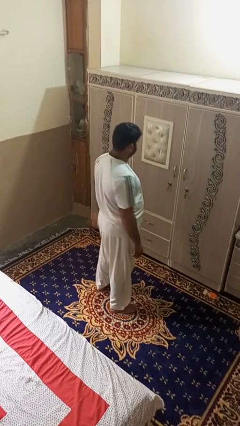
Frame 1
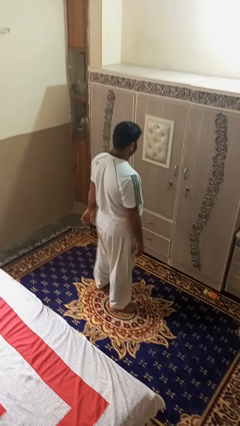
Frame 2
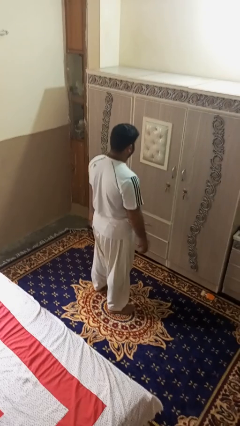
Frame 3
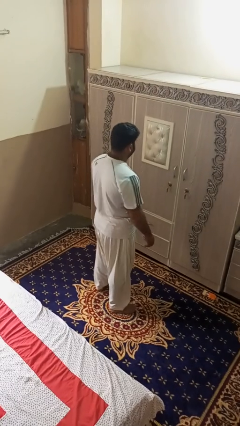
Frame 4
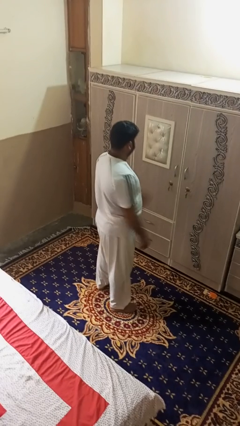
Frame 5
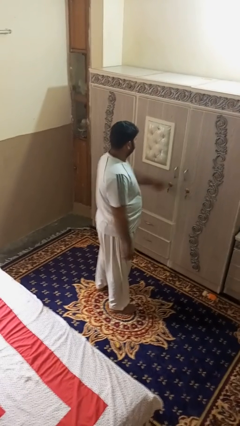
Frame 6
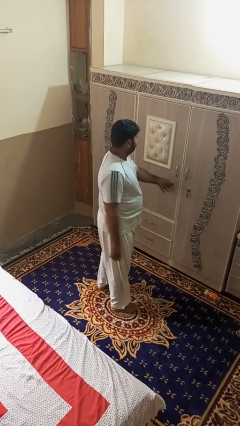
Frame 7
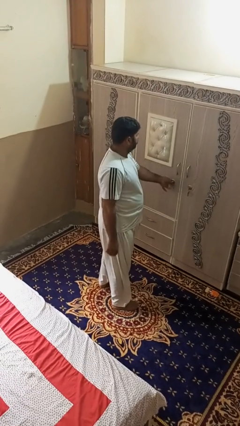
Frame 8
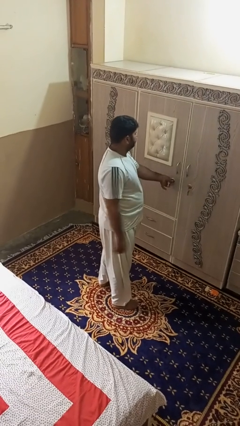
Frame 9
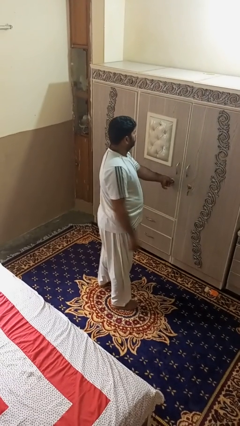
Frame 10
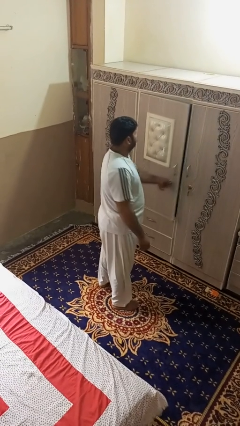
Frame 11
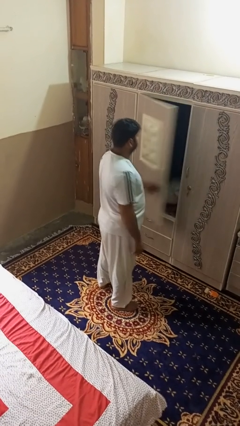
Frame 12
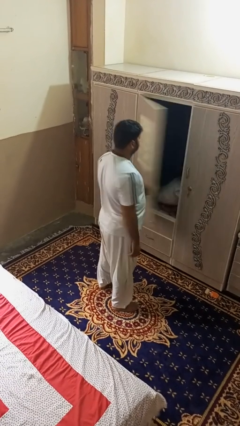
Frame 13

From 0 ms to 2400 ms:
person opens dresser drawer

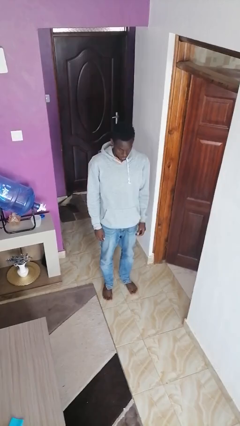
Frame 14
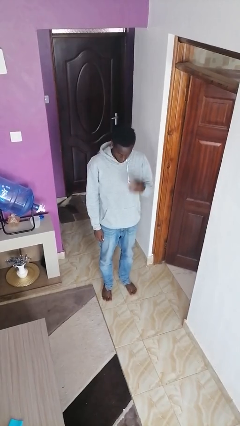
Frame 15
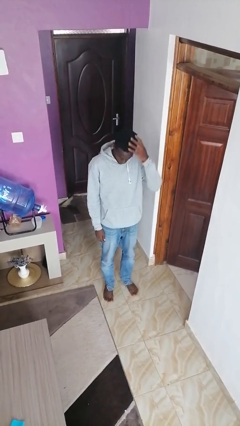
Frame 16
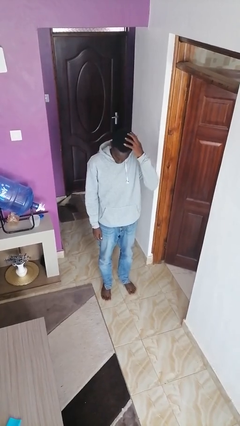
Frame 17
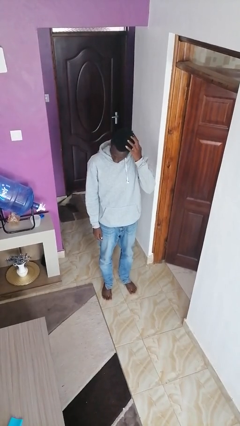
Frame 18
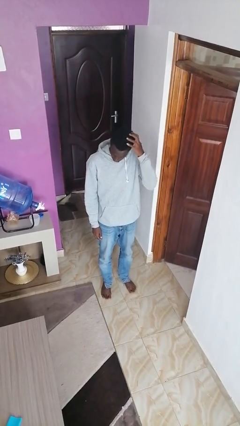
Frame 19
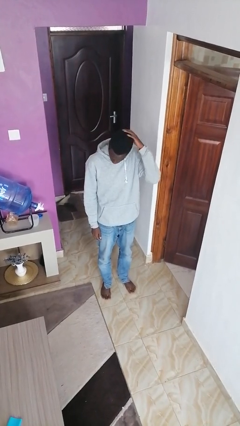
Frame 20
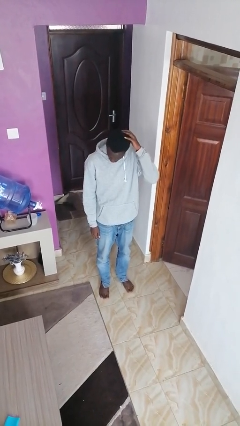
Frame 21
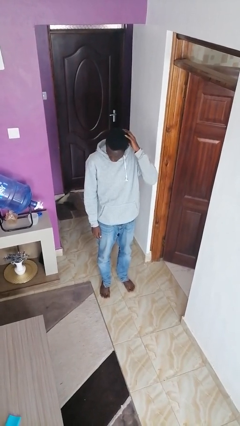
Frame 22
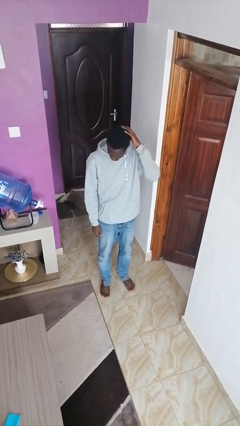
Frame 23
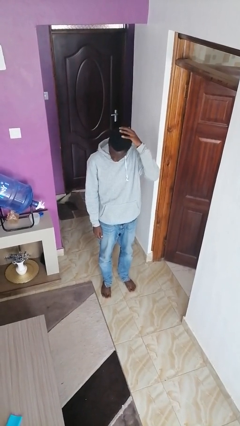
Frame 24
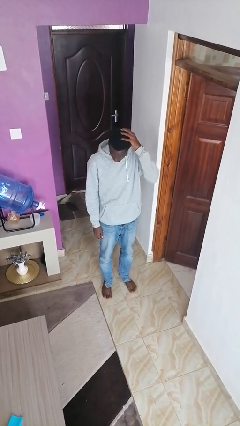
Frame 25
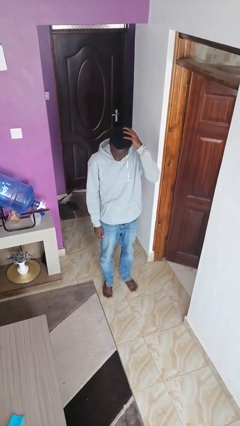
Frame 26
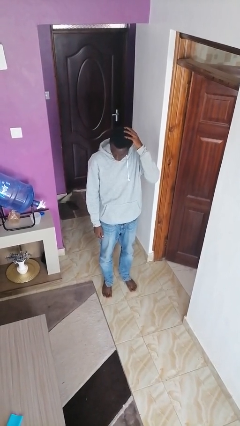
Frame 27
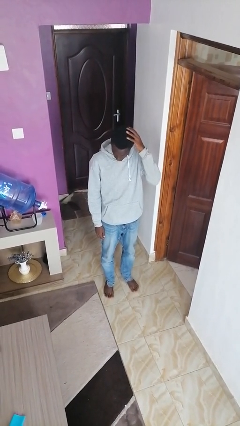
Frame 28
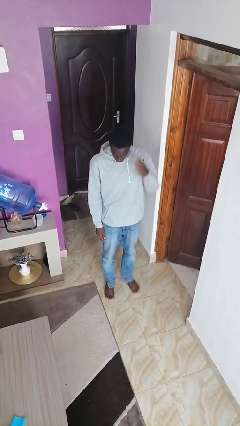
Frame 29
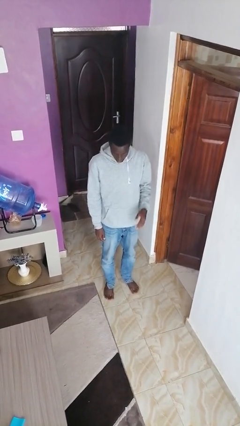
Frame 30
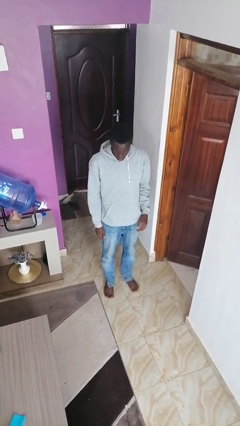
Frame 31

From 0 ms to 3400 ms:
person strokes hair

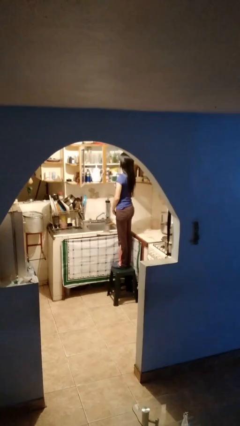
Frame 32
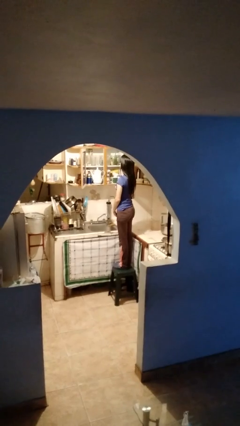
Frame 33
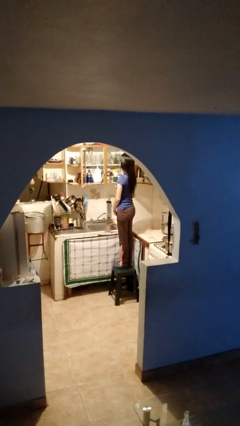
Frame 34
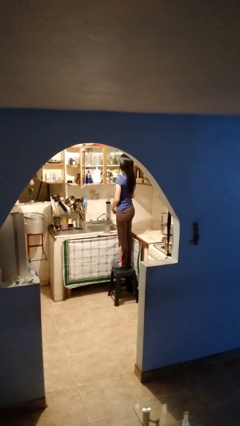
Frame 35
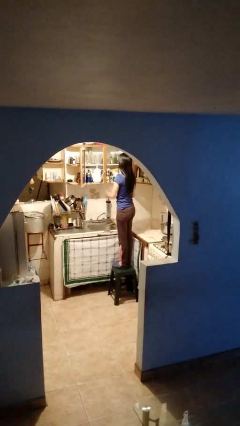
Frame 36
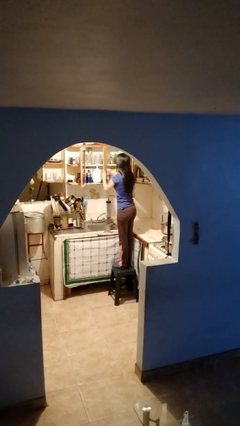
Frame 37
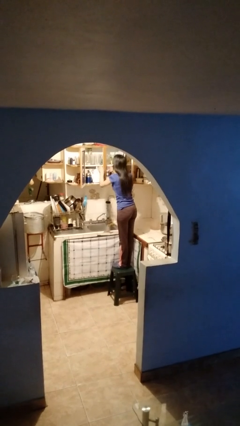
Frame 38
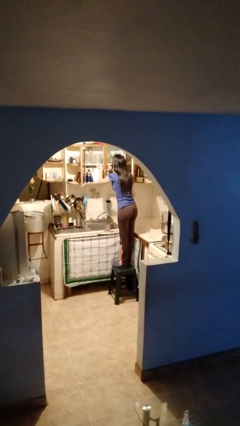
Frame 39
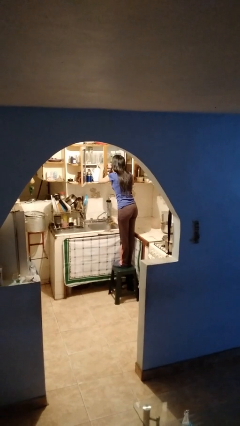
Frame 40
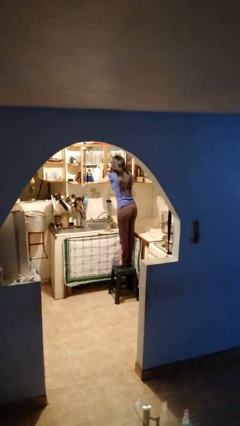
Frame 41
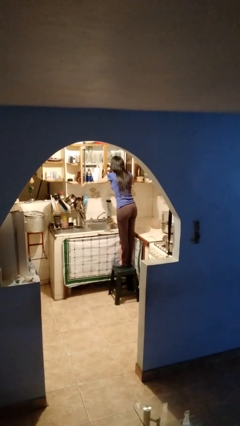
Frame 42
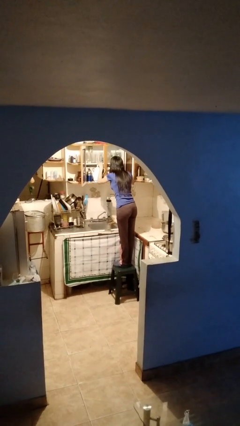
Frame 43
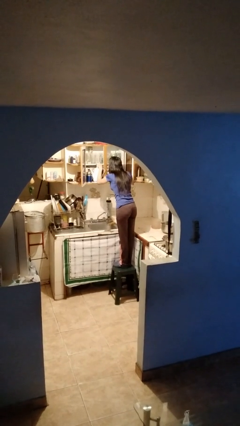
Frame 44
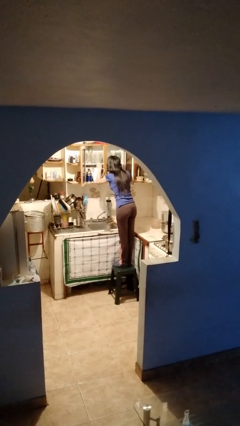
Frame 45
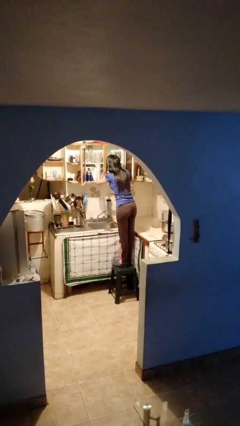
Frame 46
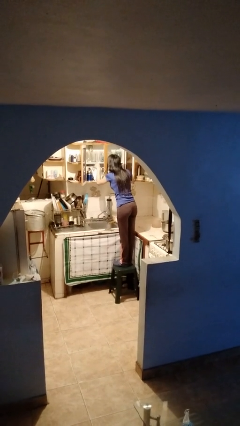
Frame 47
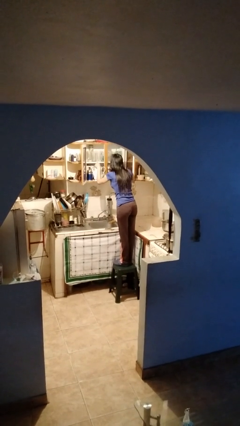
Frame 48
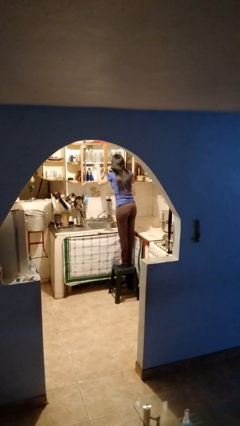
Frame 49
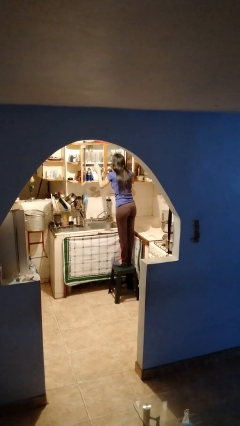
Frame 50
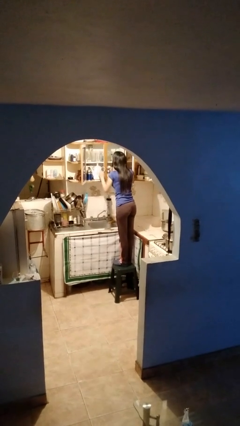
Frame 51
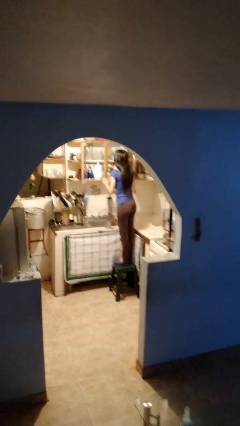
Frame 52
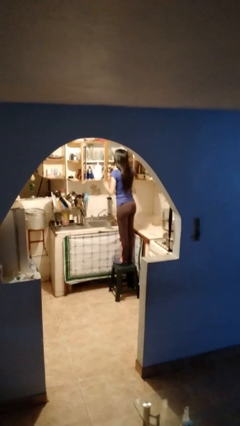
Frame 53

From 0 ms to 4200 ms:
person searches in cabinet

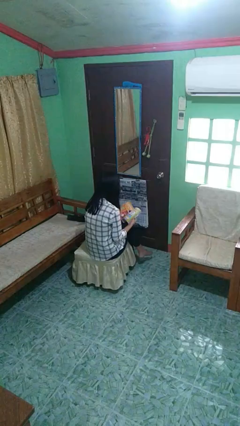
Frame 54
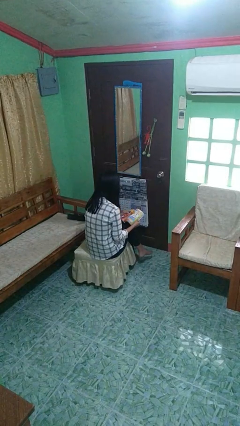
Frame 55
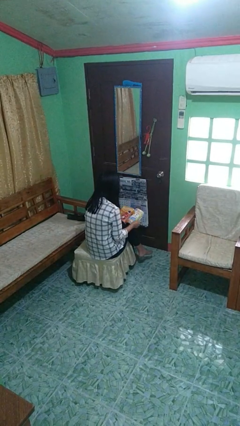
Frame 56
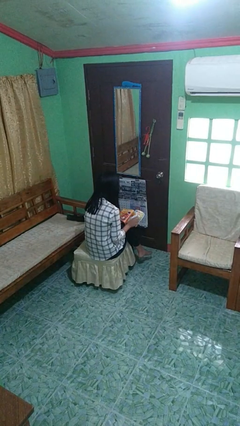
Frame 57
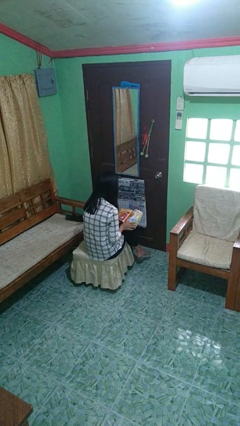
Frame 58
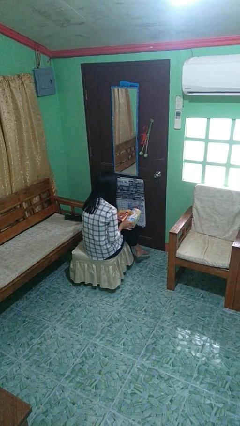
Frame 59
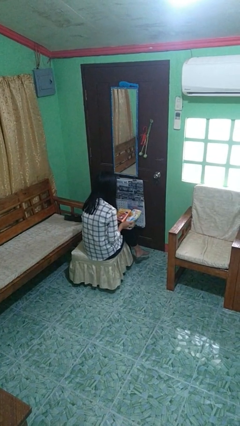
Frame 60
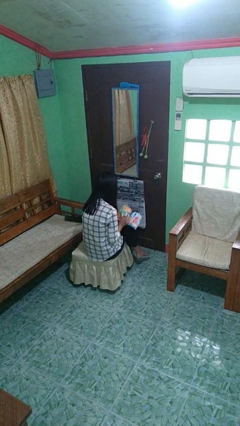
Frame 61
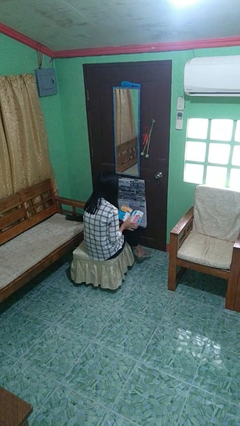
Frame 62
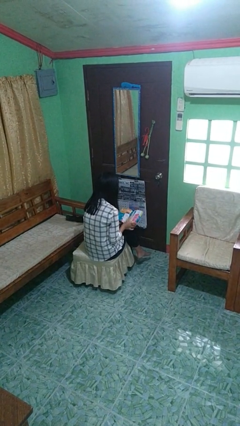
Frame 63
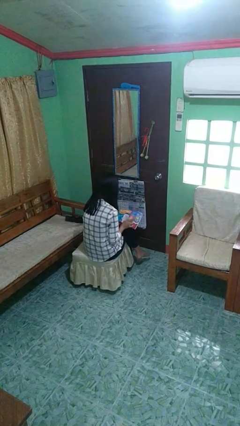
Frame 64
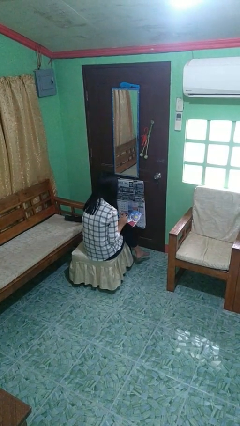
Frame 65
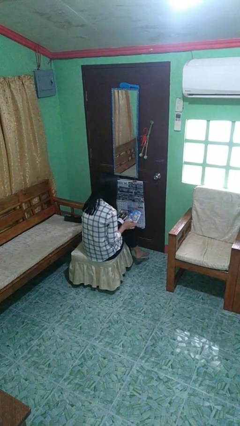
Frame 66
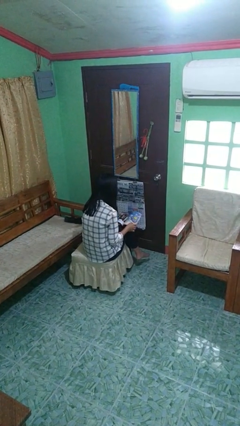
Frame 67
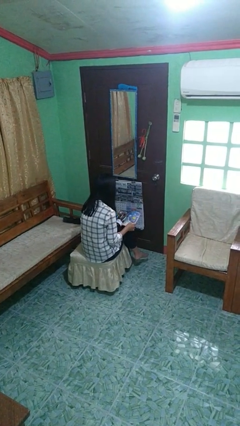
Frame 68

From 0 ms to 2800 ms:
person reads magazine

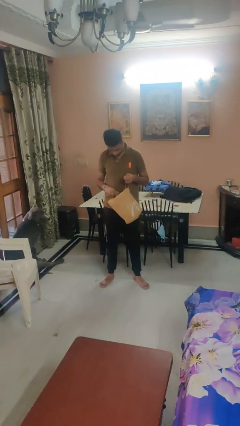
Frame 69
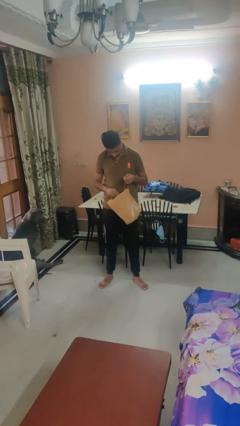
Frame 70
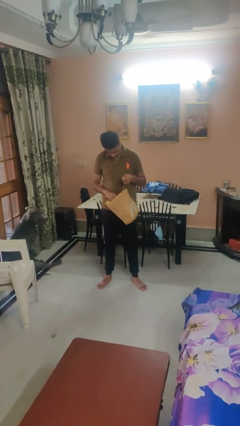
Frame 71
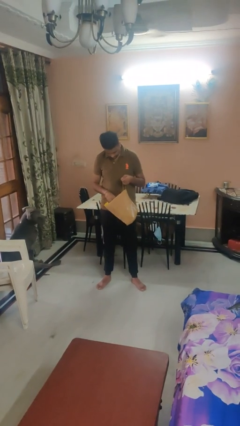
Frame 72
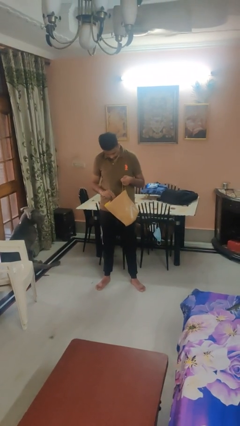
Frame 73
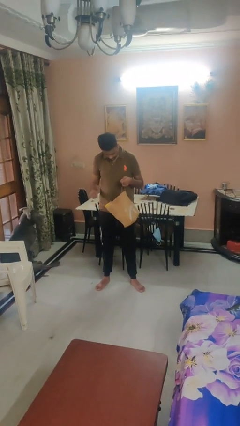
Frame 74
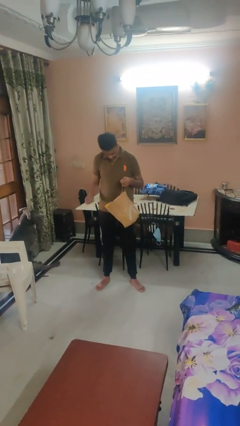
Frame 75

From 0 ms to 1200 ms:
person puts object into bag

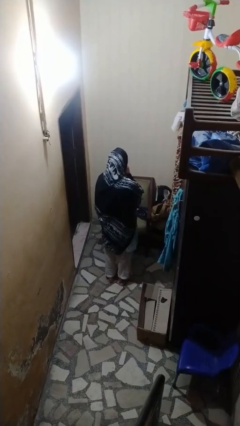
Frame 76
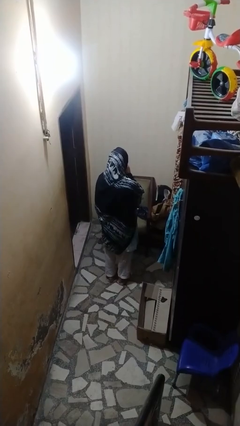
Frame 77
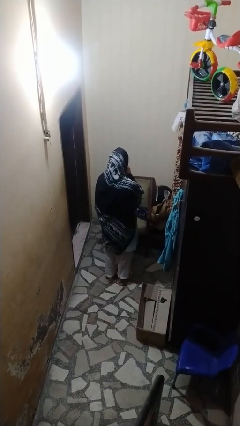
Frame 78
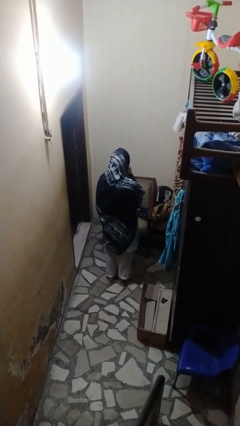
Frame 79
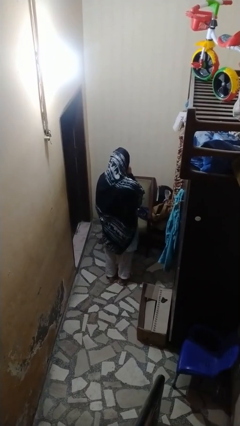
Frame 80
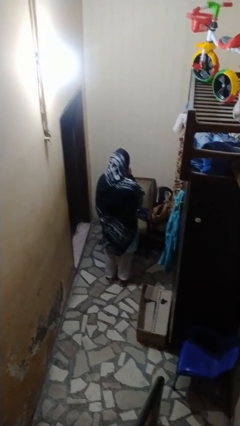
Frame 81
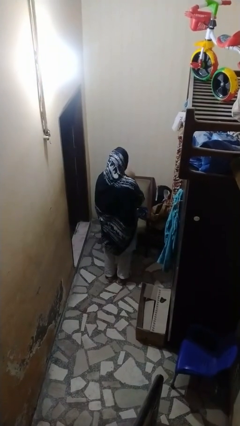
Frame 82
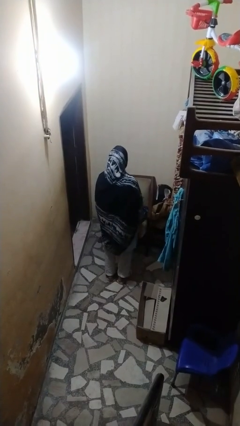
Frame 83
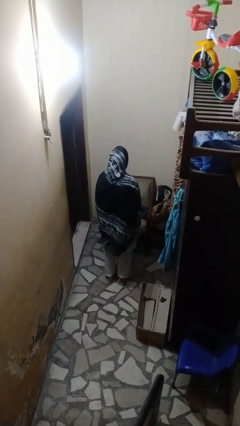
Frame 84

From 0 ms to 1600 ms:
person gestures be quiet

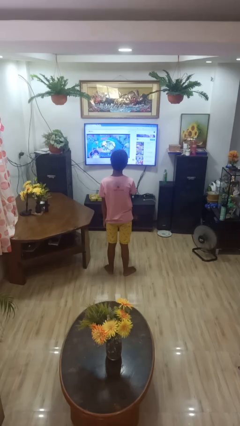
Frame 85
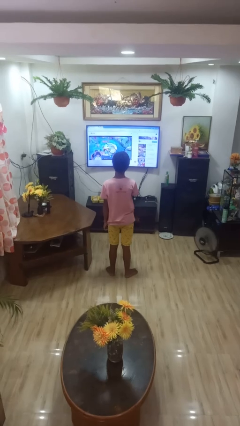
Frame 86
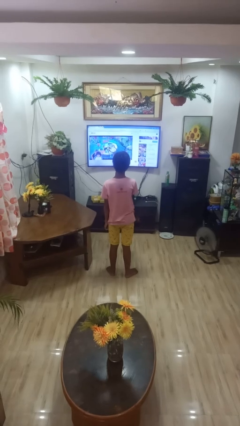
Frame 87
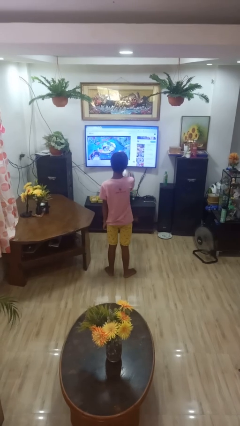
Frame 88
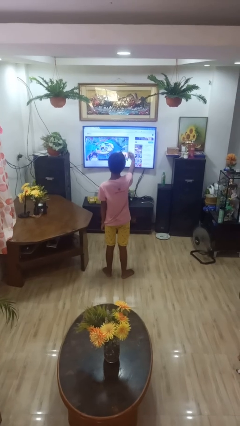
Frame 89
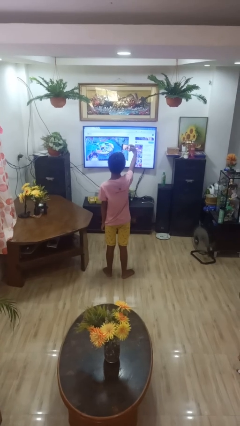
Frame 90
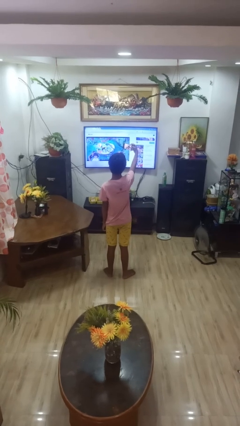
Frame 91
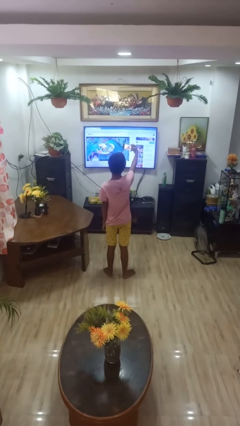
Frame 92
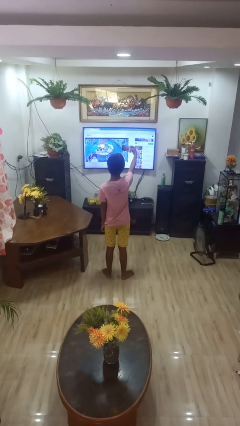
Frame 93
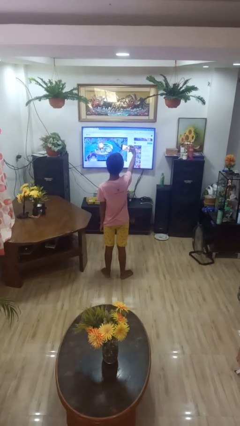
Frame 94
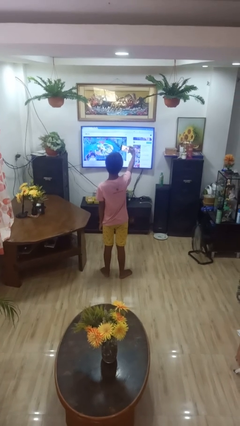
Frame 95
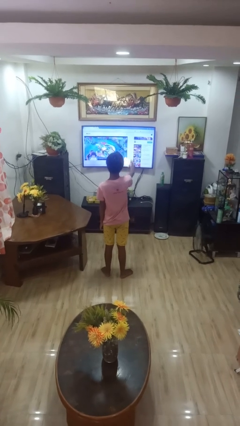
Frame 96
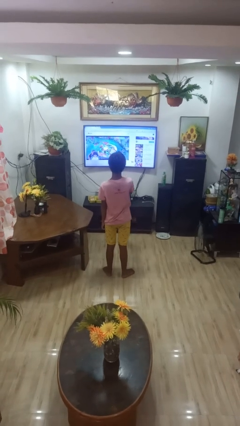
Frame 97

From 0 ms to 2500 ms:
person takes selfie
